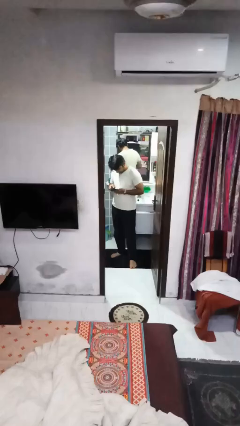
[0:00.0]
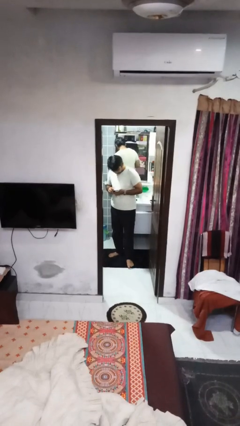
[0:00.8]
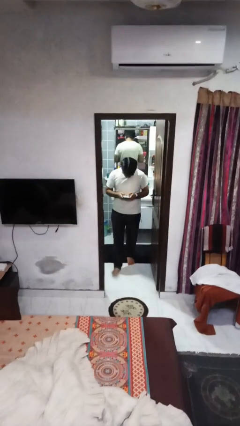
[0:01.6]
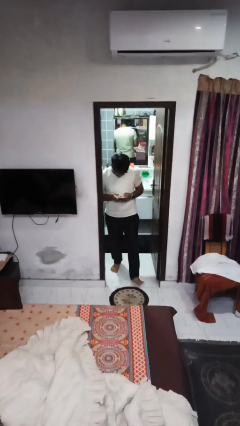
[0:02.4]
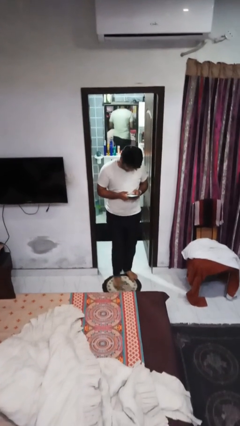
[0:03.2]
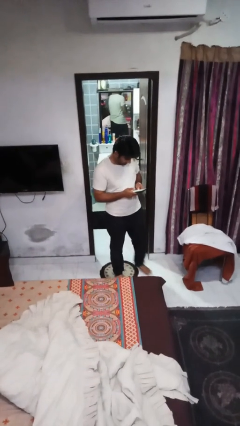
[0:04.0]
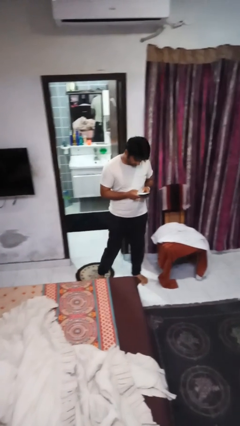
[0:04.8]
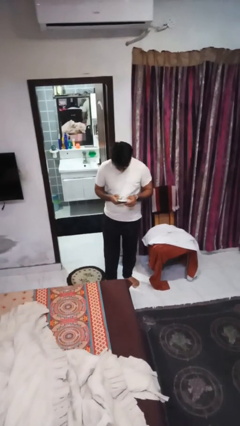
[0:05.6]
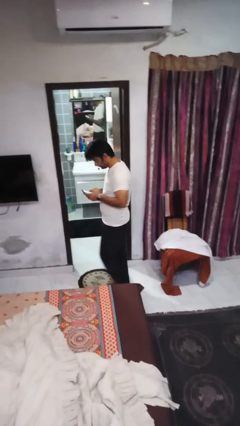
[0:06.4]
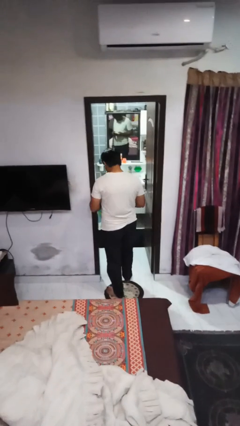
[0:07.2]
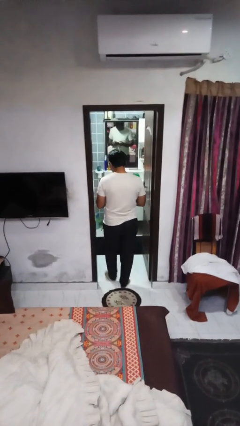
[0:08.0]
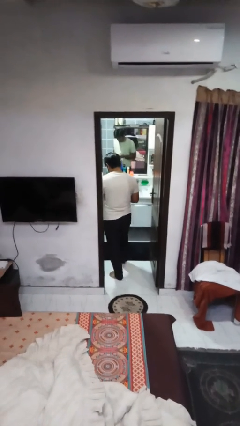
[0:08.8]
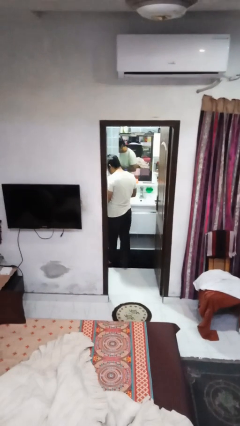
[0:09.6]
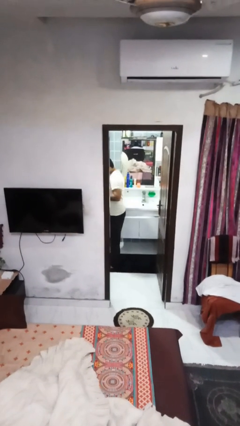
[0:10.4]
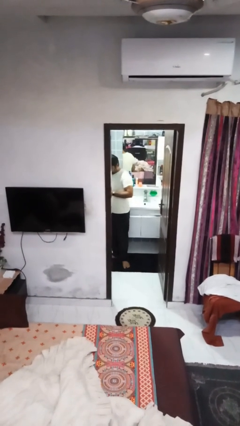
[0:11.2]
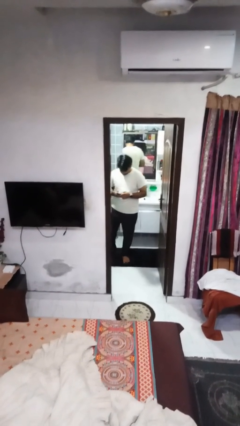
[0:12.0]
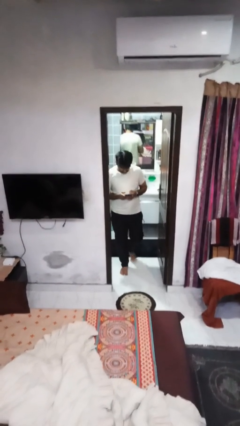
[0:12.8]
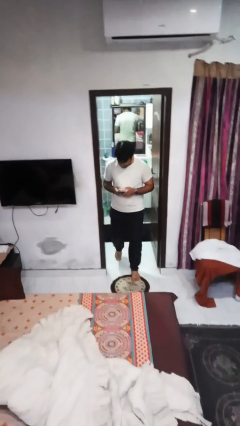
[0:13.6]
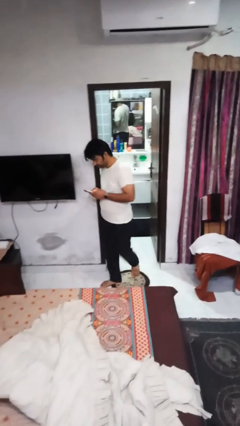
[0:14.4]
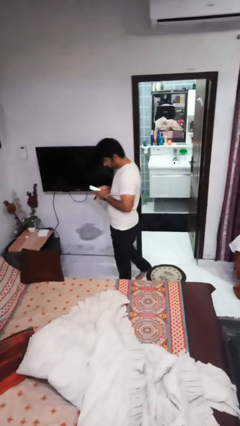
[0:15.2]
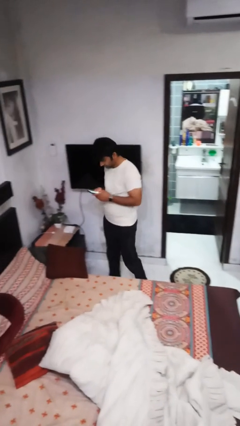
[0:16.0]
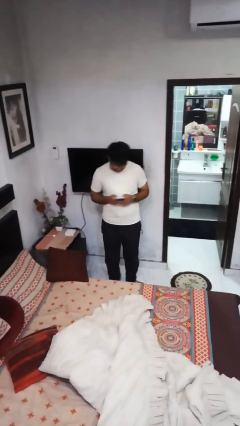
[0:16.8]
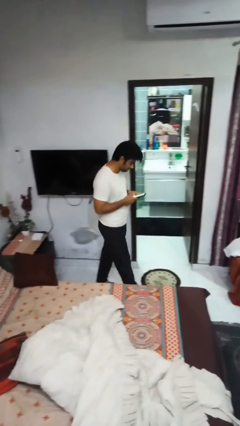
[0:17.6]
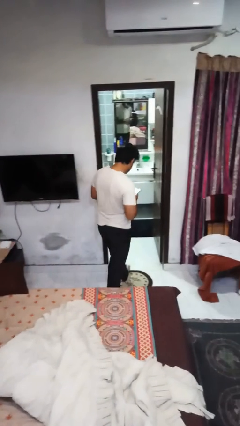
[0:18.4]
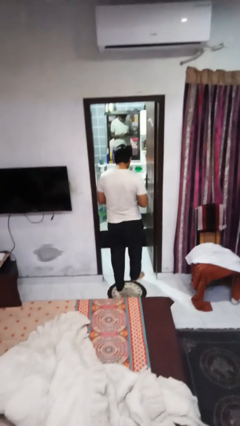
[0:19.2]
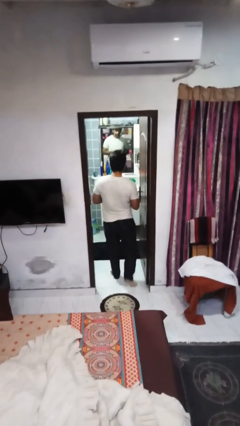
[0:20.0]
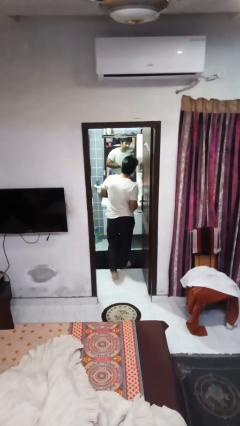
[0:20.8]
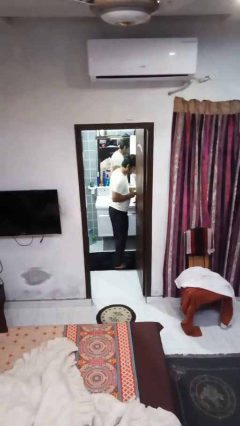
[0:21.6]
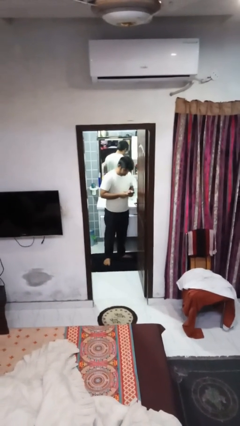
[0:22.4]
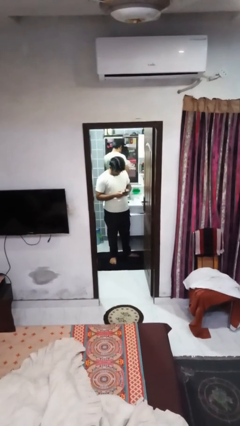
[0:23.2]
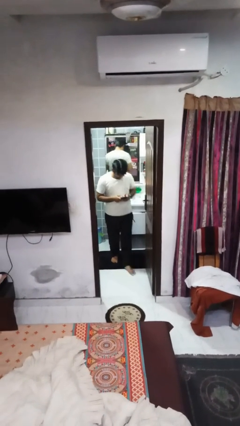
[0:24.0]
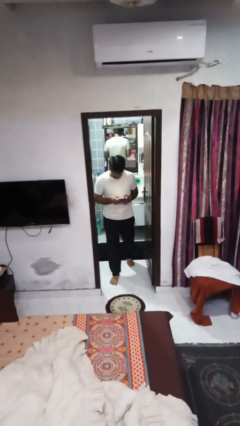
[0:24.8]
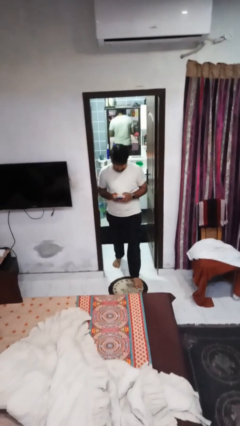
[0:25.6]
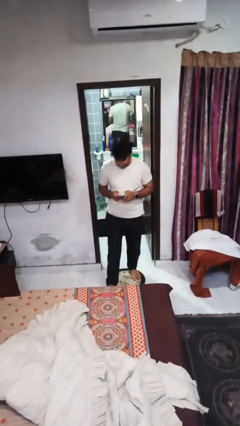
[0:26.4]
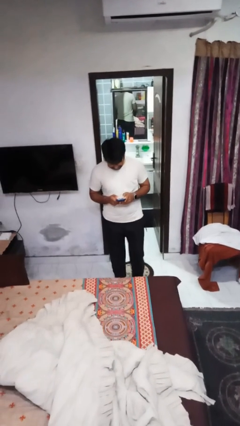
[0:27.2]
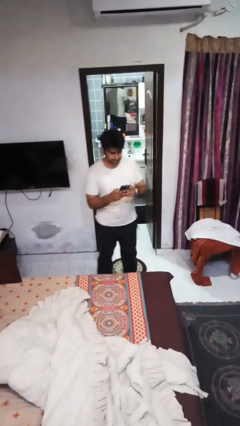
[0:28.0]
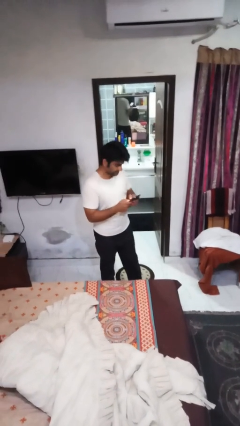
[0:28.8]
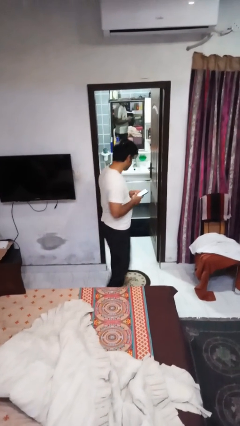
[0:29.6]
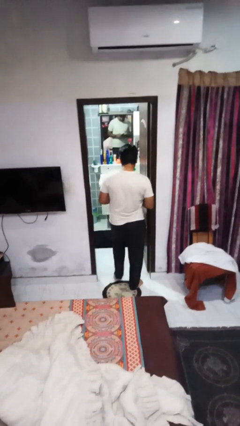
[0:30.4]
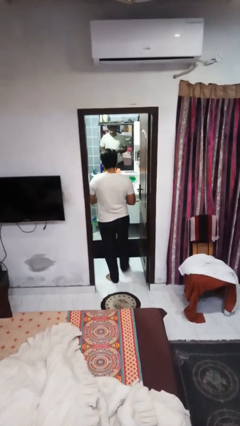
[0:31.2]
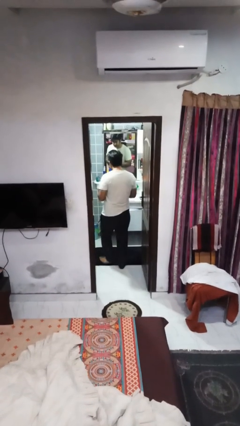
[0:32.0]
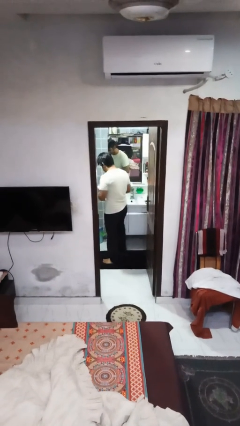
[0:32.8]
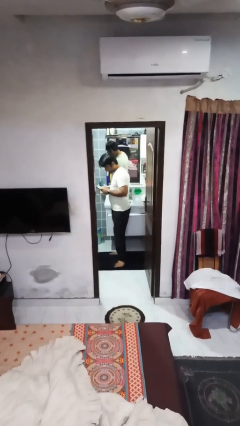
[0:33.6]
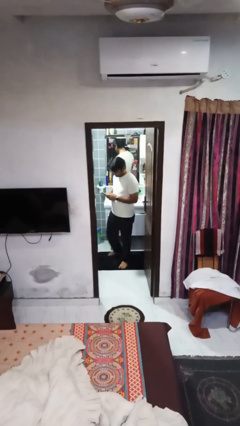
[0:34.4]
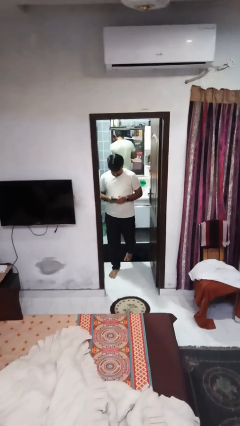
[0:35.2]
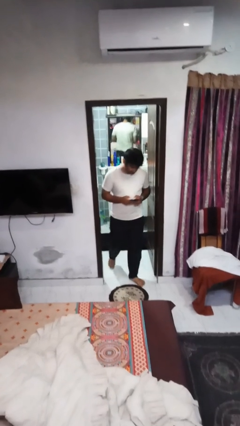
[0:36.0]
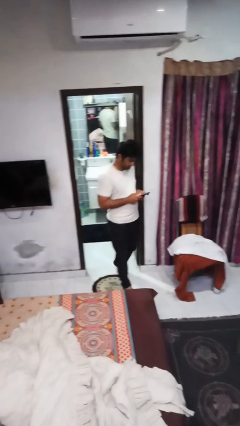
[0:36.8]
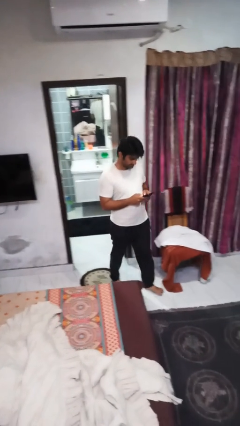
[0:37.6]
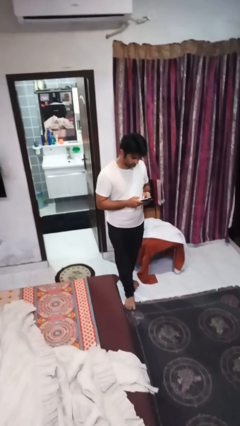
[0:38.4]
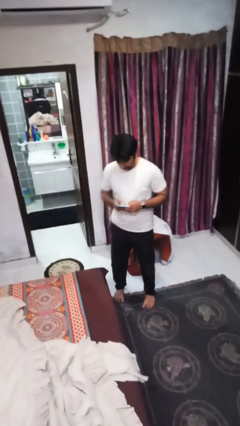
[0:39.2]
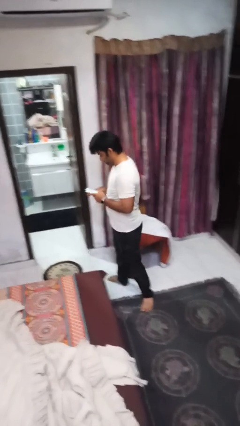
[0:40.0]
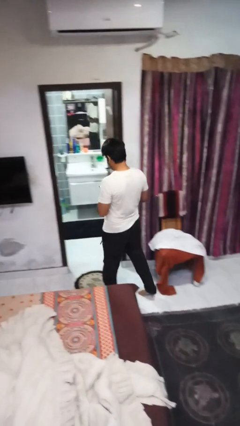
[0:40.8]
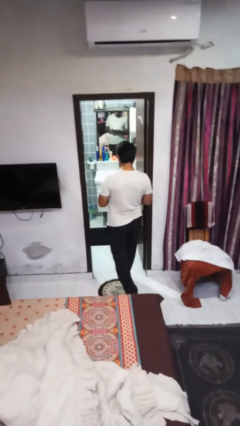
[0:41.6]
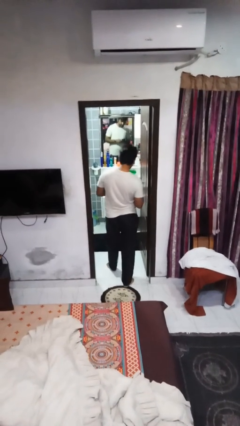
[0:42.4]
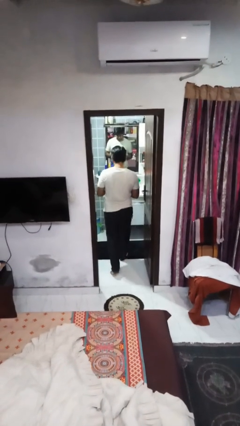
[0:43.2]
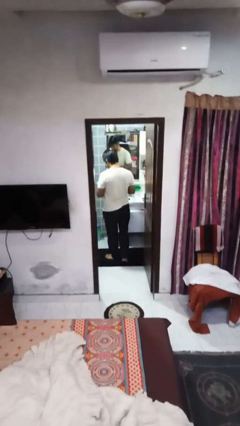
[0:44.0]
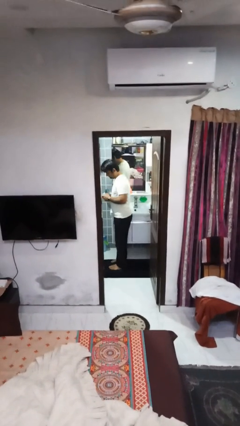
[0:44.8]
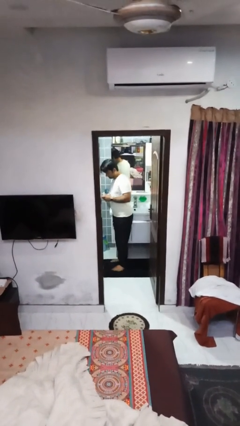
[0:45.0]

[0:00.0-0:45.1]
person texts on phone

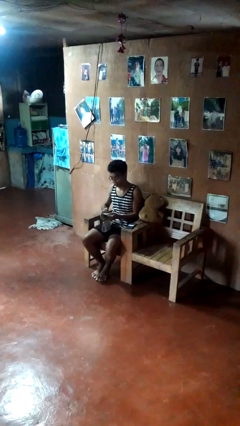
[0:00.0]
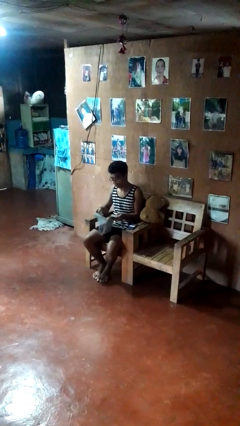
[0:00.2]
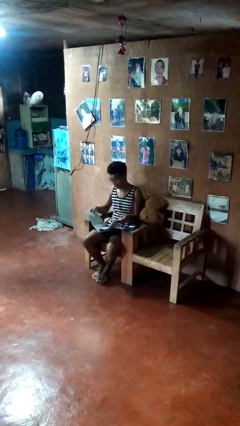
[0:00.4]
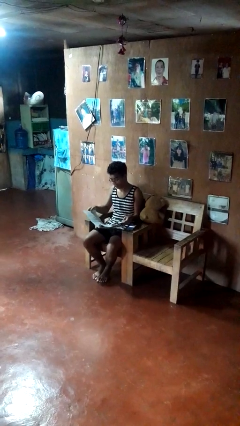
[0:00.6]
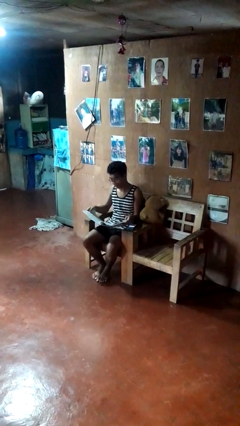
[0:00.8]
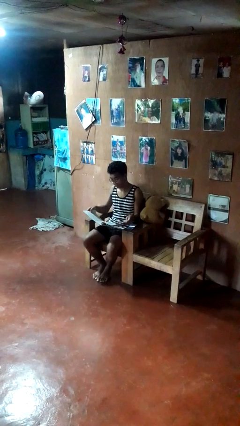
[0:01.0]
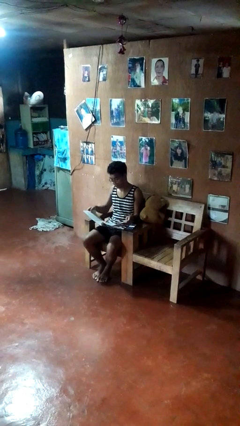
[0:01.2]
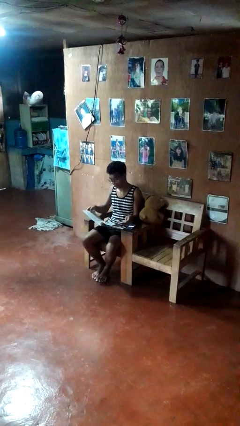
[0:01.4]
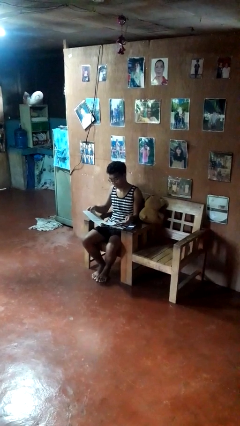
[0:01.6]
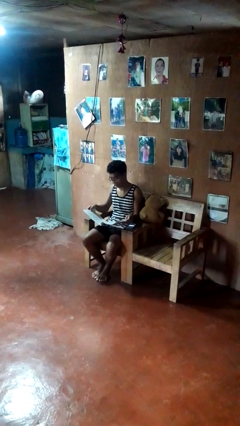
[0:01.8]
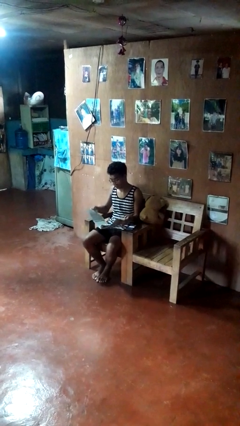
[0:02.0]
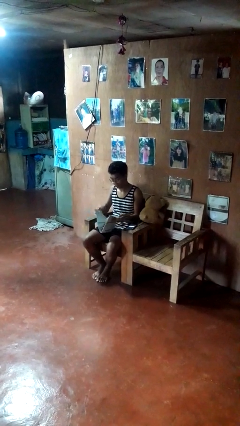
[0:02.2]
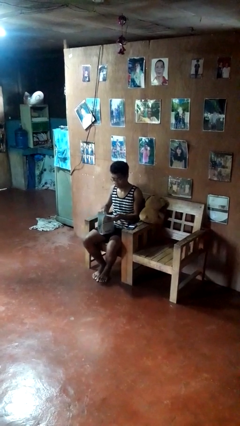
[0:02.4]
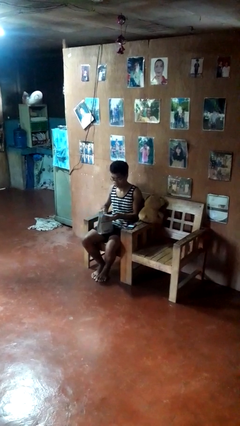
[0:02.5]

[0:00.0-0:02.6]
person reads newspaper

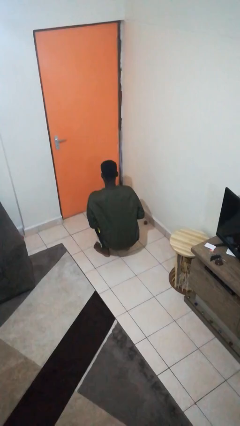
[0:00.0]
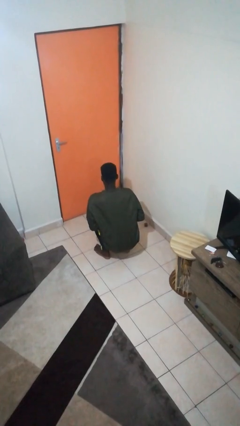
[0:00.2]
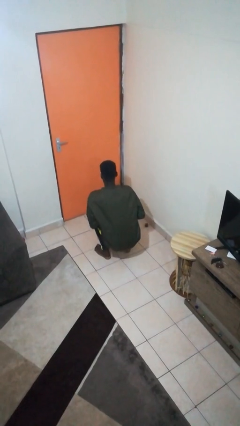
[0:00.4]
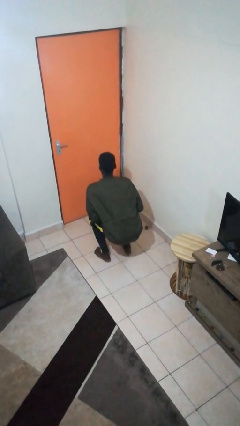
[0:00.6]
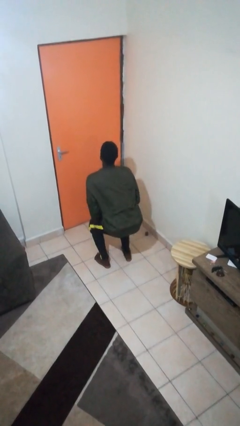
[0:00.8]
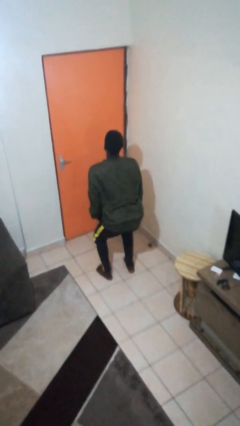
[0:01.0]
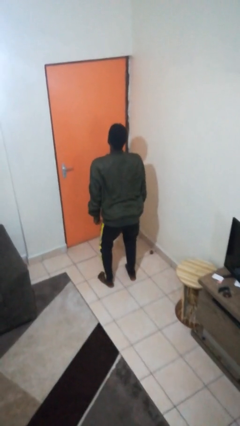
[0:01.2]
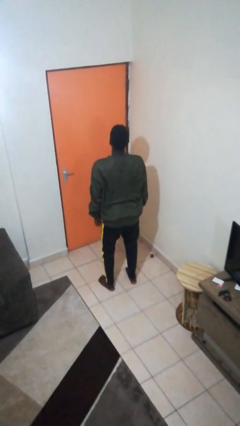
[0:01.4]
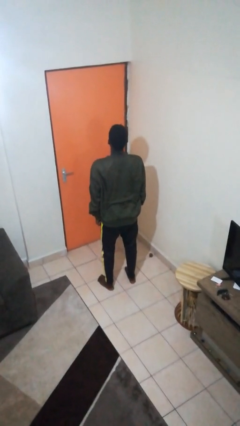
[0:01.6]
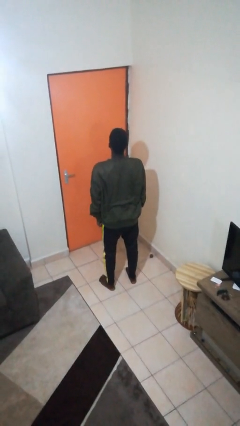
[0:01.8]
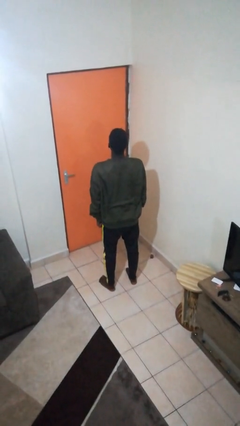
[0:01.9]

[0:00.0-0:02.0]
person stands up

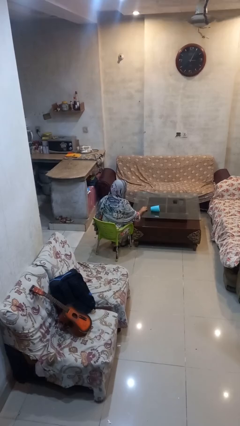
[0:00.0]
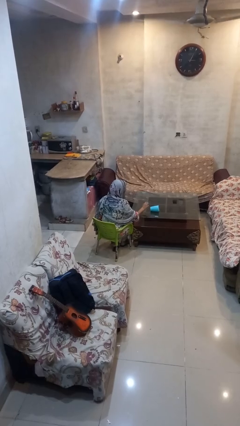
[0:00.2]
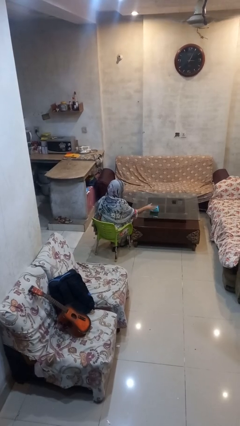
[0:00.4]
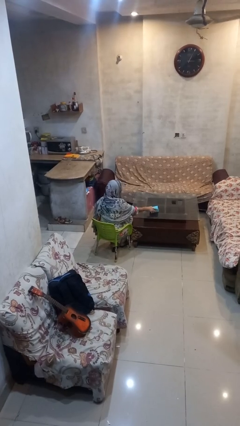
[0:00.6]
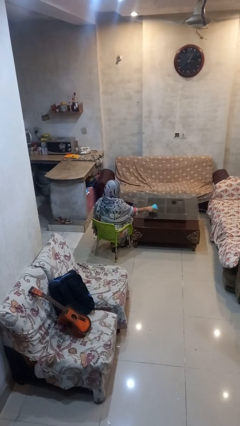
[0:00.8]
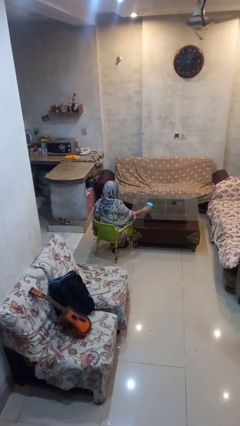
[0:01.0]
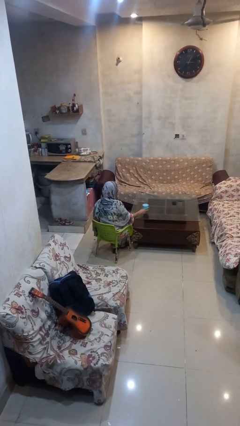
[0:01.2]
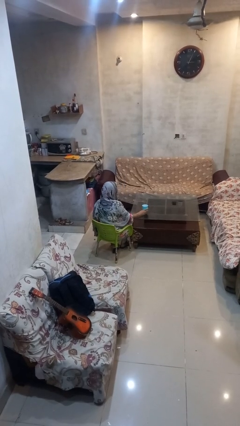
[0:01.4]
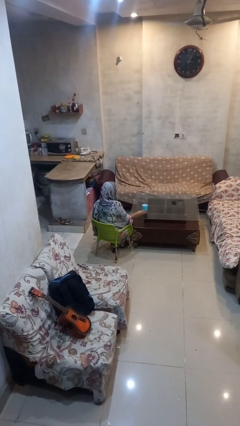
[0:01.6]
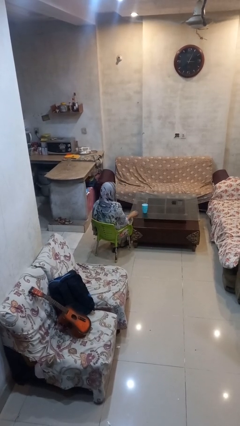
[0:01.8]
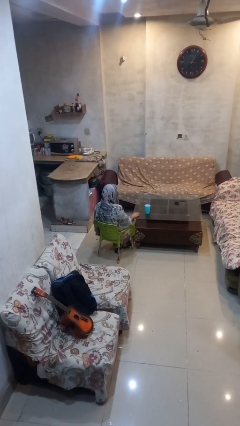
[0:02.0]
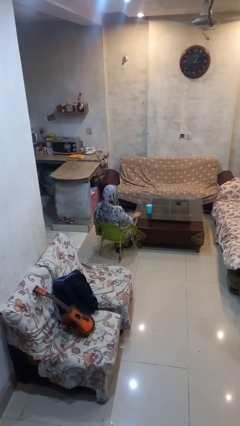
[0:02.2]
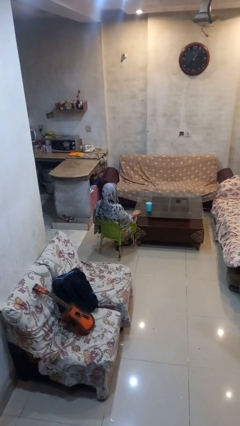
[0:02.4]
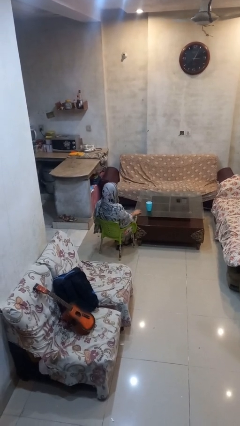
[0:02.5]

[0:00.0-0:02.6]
person sets upright glass
